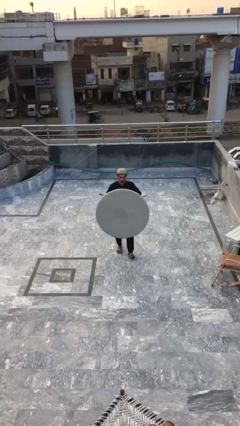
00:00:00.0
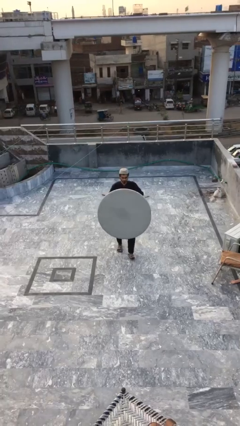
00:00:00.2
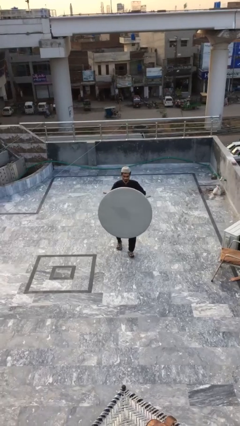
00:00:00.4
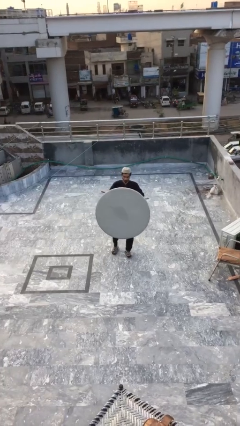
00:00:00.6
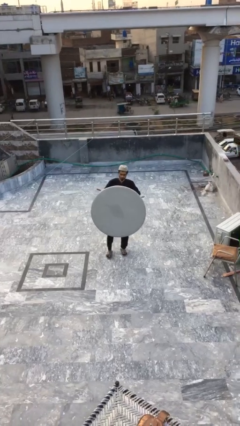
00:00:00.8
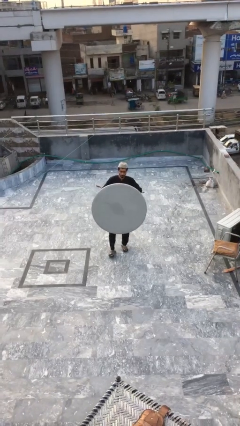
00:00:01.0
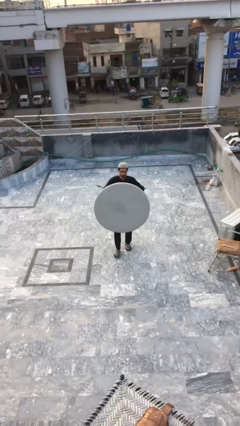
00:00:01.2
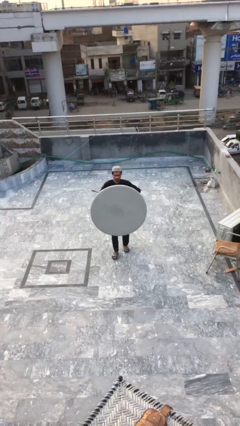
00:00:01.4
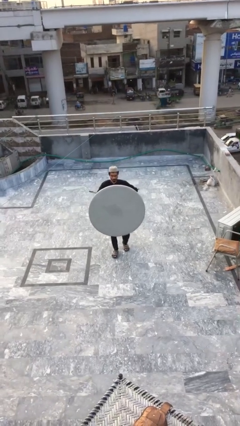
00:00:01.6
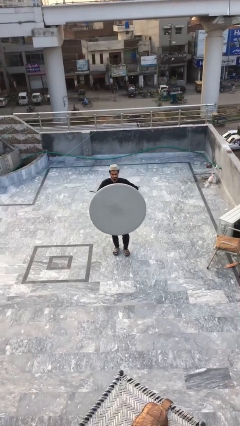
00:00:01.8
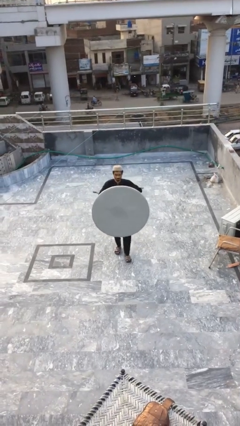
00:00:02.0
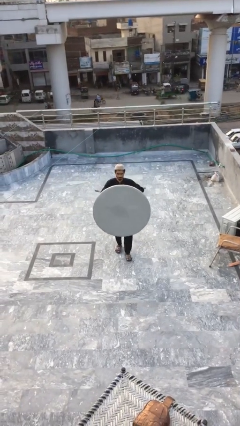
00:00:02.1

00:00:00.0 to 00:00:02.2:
person carries heavy object

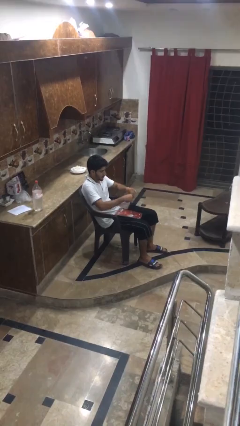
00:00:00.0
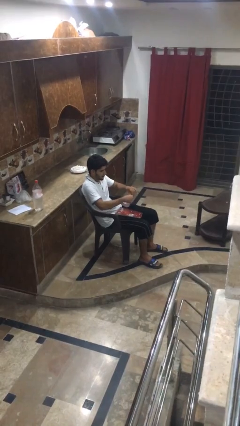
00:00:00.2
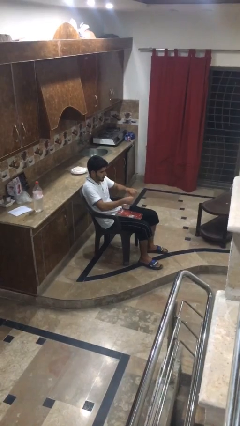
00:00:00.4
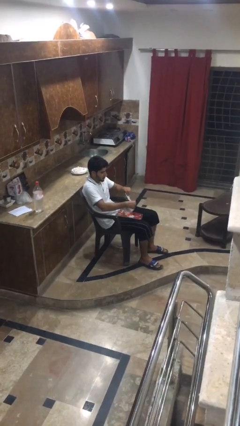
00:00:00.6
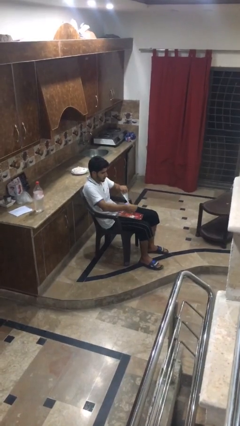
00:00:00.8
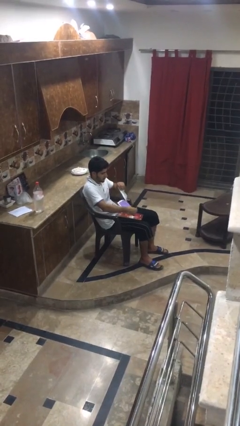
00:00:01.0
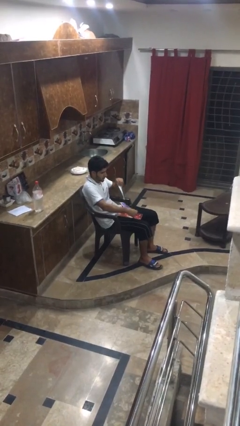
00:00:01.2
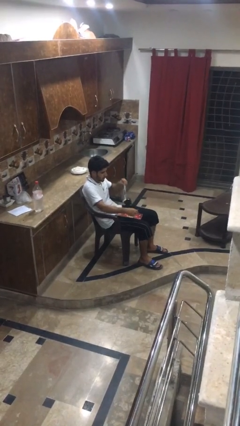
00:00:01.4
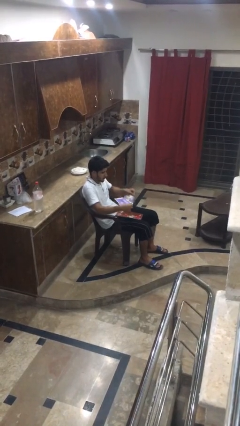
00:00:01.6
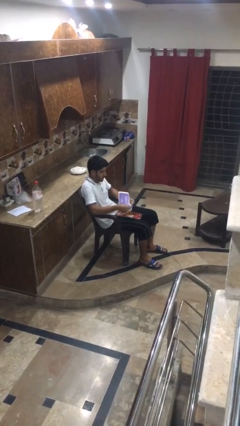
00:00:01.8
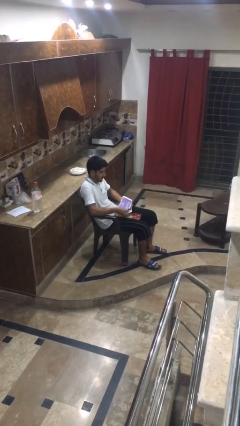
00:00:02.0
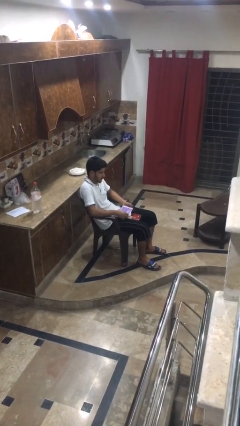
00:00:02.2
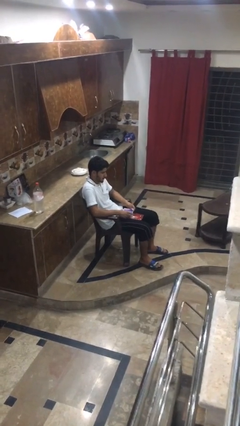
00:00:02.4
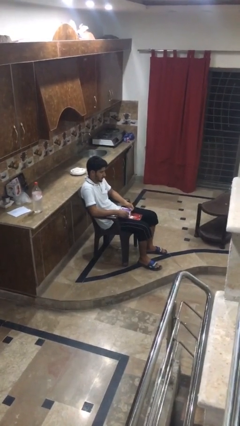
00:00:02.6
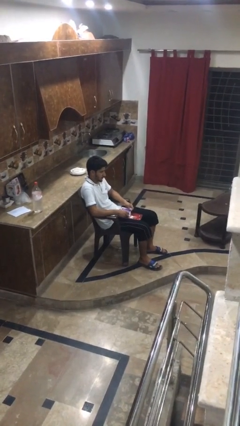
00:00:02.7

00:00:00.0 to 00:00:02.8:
person tears paper

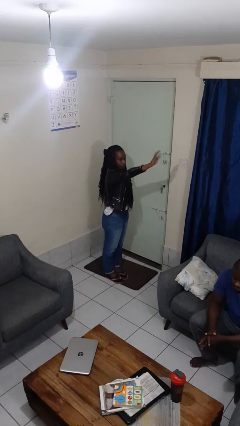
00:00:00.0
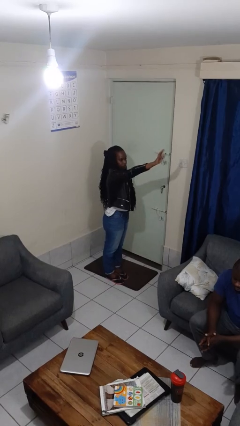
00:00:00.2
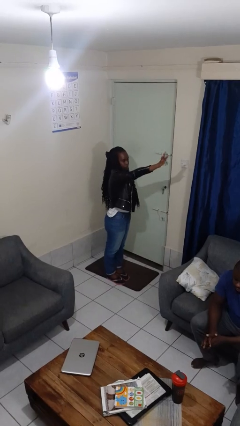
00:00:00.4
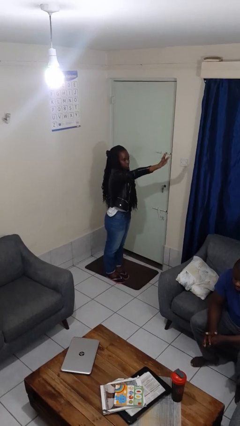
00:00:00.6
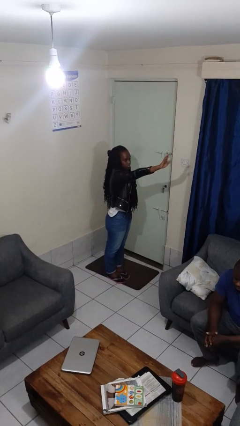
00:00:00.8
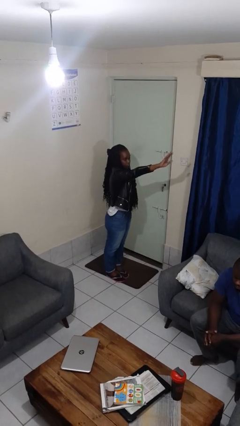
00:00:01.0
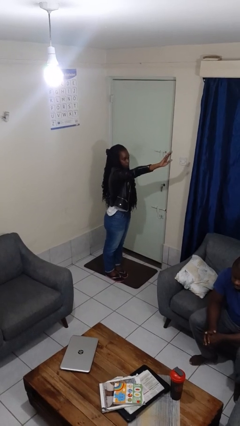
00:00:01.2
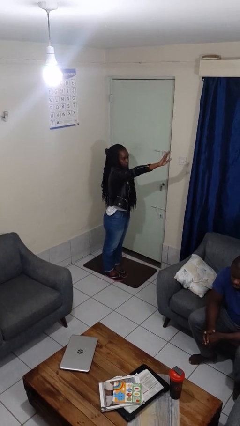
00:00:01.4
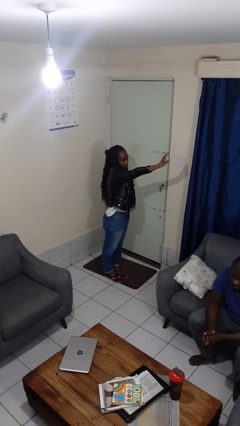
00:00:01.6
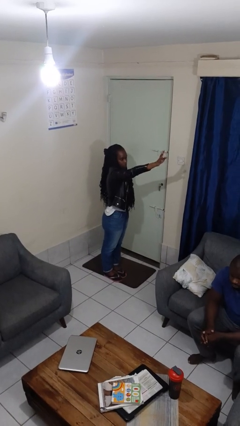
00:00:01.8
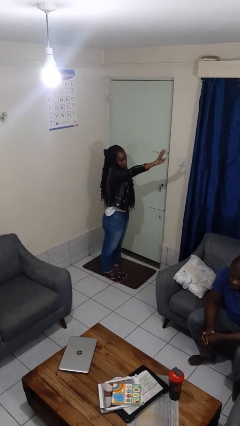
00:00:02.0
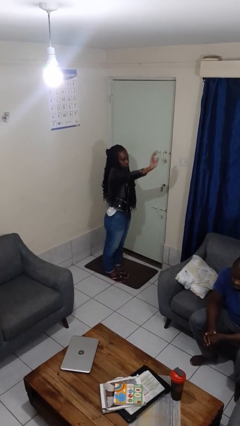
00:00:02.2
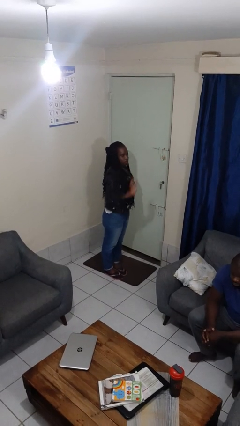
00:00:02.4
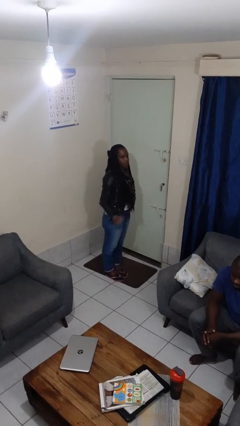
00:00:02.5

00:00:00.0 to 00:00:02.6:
person waves at person

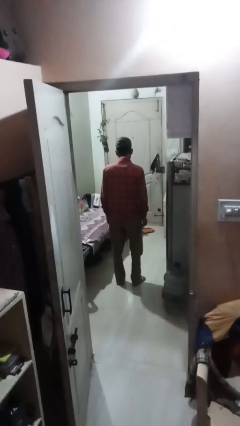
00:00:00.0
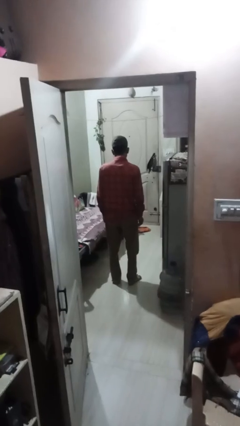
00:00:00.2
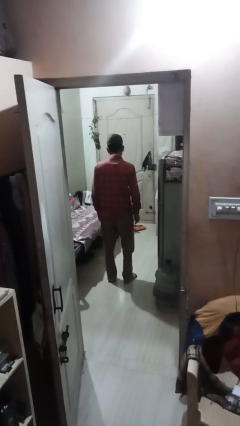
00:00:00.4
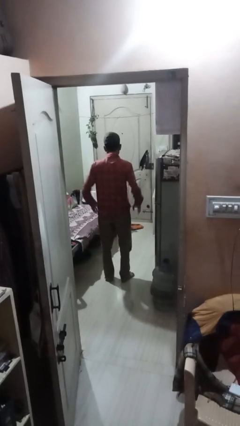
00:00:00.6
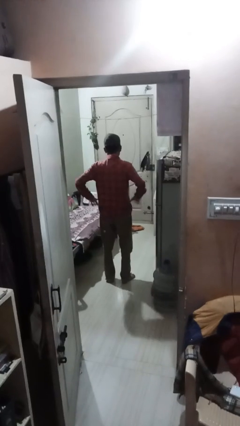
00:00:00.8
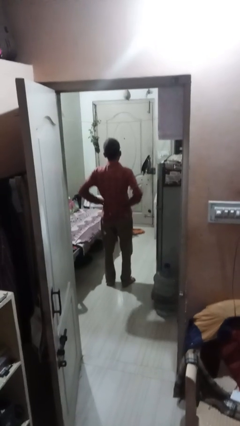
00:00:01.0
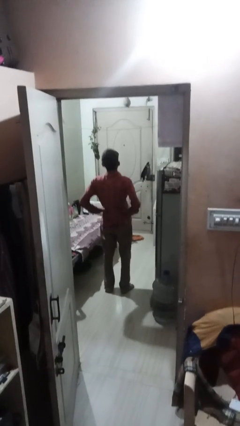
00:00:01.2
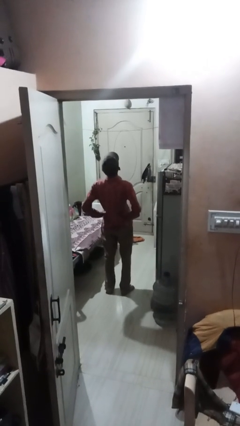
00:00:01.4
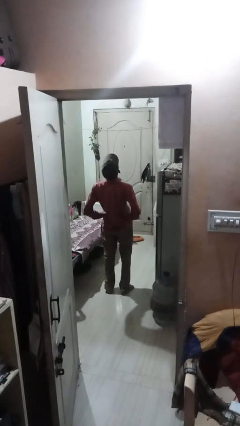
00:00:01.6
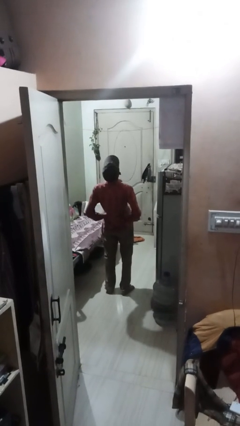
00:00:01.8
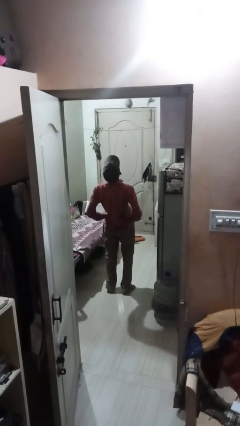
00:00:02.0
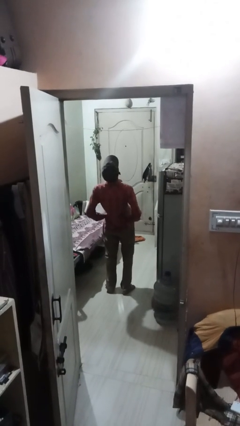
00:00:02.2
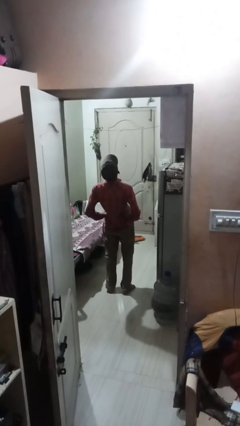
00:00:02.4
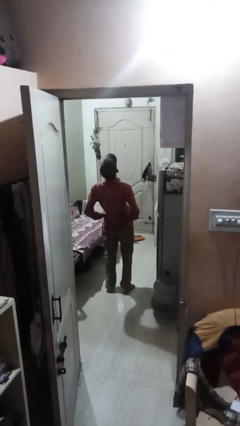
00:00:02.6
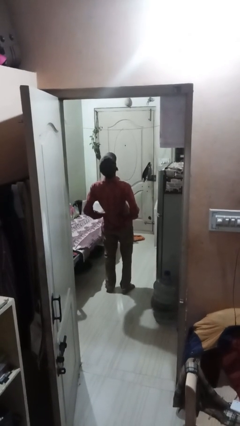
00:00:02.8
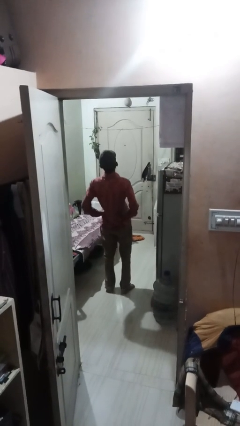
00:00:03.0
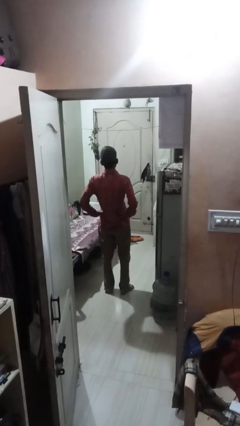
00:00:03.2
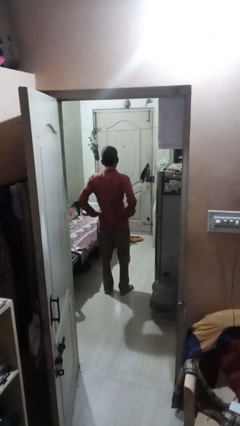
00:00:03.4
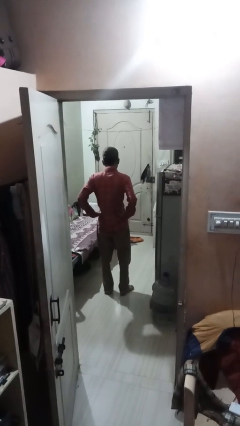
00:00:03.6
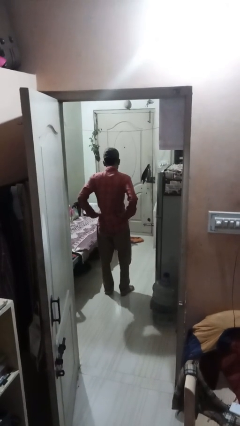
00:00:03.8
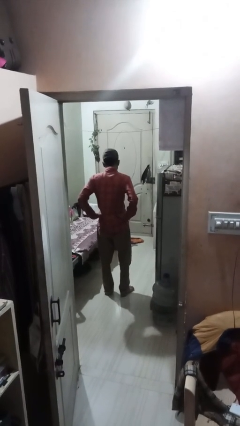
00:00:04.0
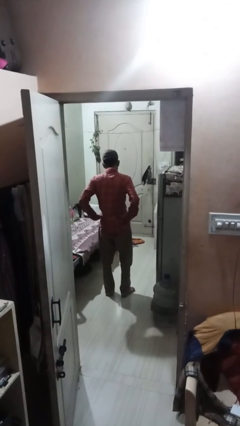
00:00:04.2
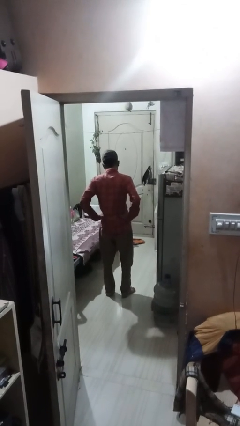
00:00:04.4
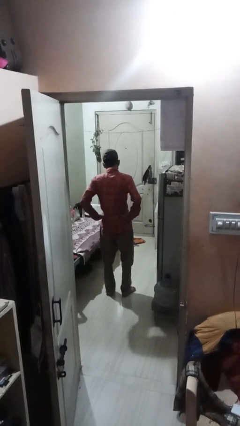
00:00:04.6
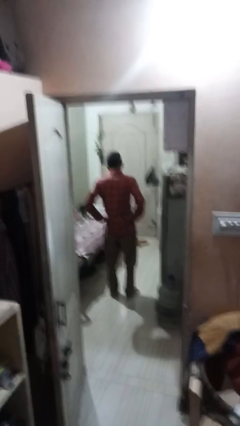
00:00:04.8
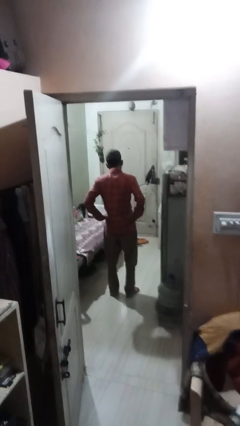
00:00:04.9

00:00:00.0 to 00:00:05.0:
person stretches back

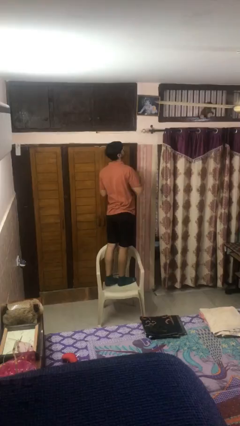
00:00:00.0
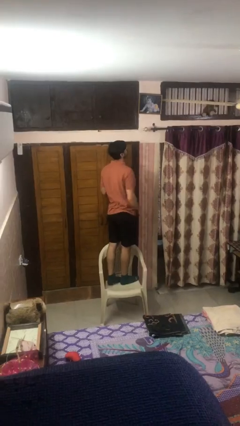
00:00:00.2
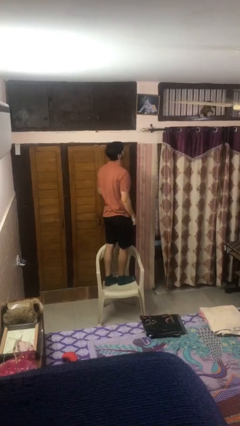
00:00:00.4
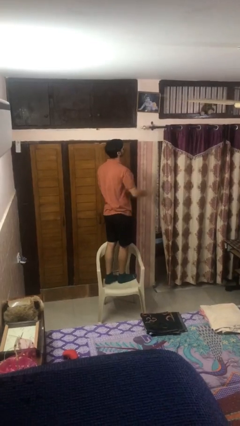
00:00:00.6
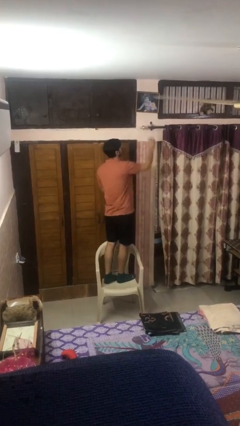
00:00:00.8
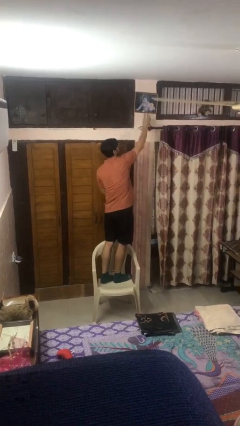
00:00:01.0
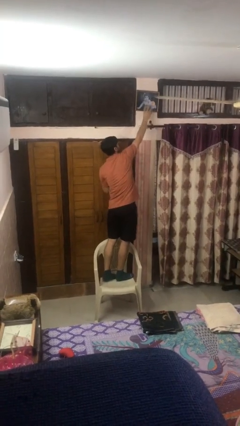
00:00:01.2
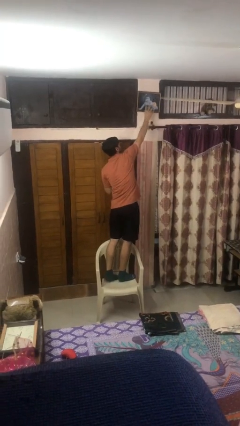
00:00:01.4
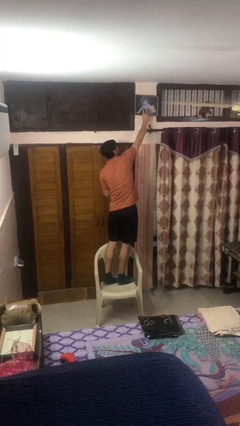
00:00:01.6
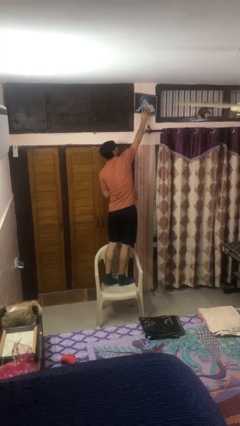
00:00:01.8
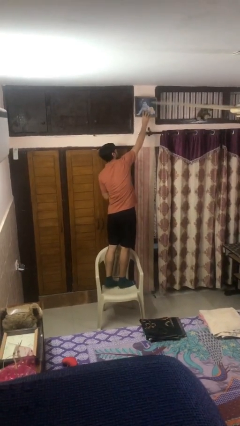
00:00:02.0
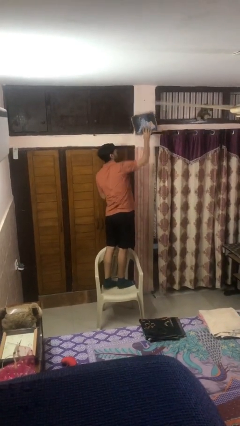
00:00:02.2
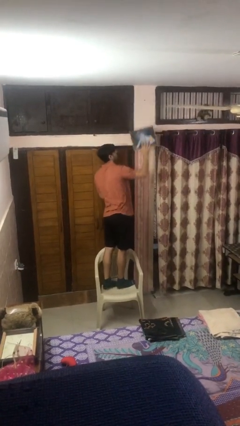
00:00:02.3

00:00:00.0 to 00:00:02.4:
person takes down picture frame

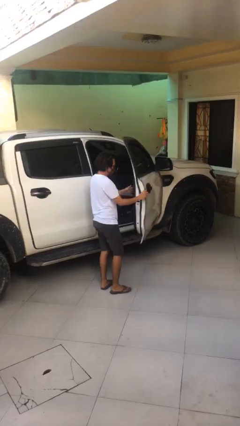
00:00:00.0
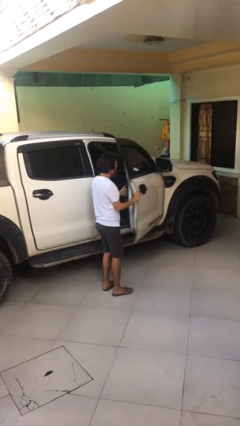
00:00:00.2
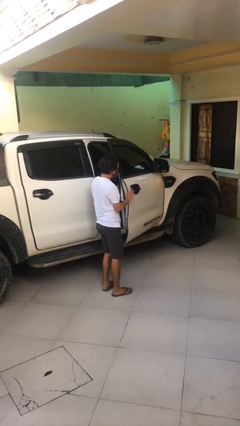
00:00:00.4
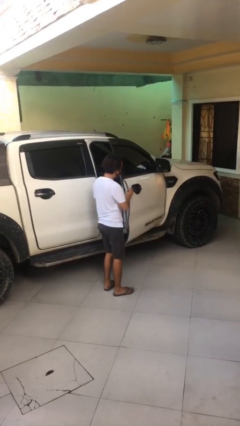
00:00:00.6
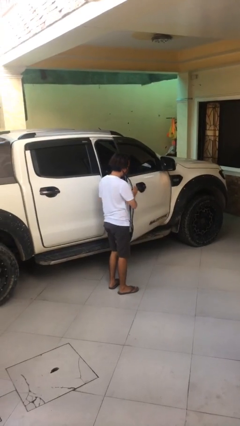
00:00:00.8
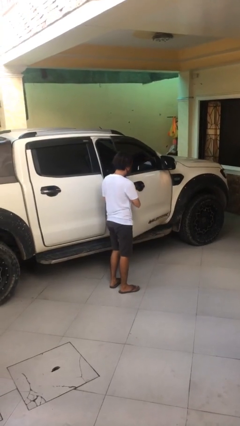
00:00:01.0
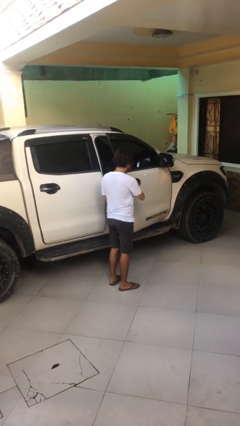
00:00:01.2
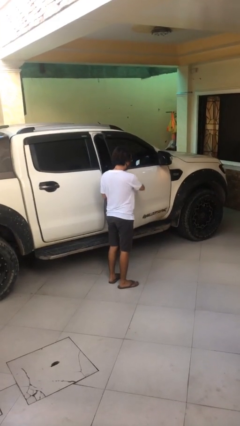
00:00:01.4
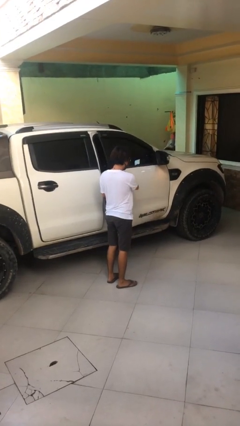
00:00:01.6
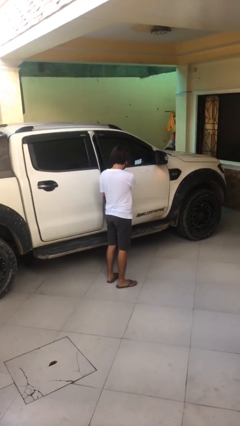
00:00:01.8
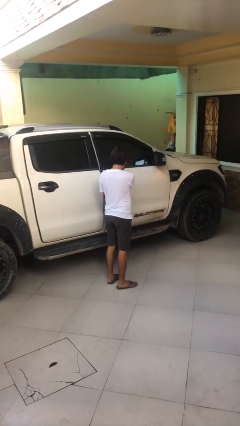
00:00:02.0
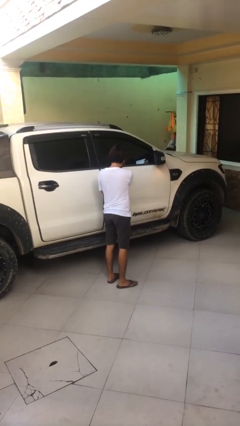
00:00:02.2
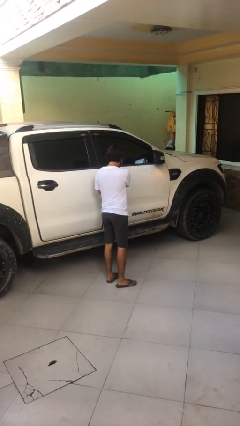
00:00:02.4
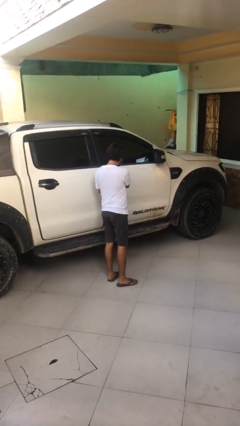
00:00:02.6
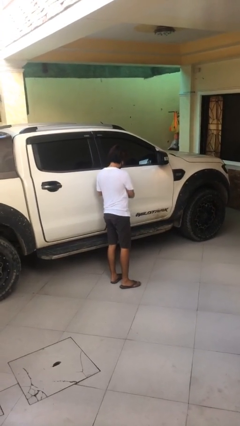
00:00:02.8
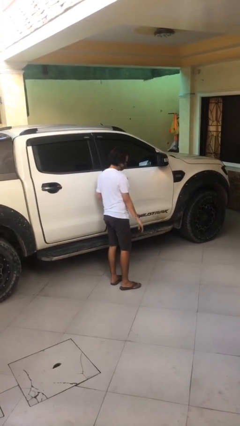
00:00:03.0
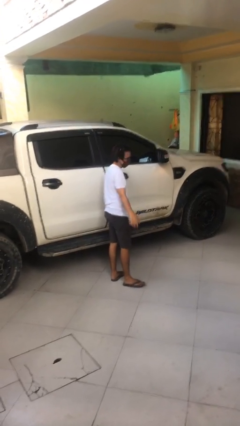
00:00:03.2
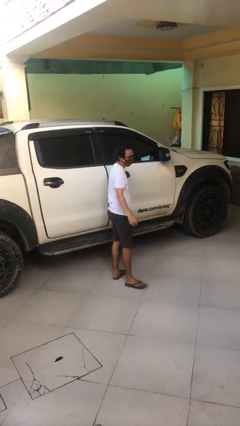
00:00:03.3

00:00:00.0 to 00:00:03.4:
person closes car door
